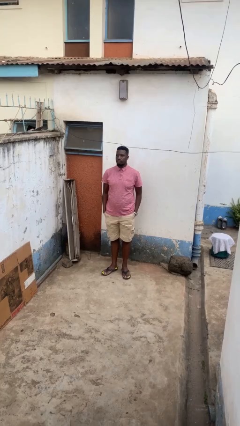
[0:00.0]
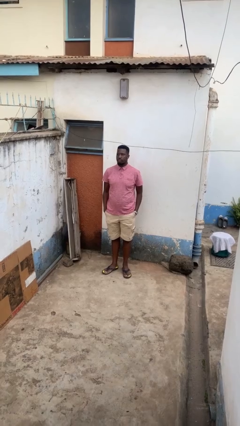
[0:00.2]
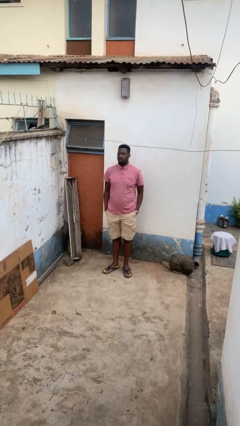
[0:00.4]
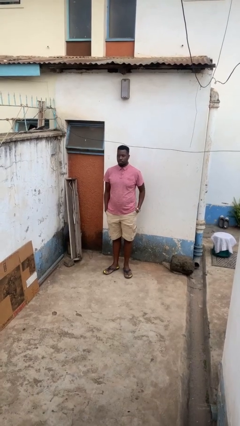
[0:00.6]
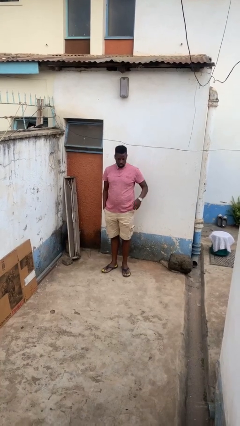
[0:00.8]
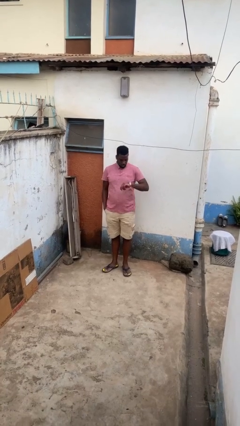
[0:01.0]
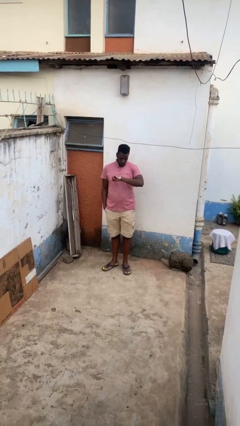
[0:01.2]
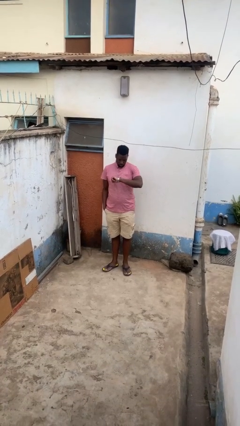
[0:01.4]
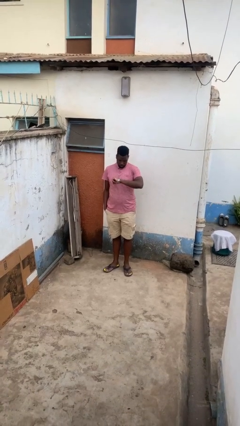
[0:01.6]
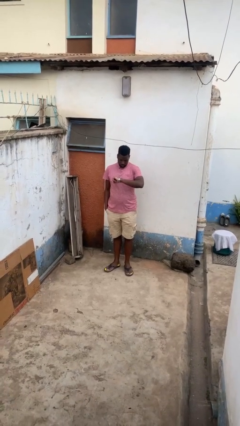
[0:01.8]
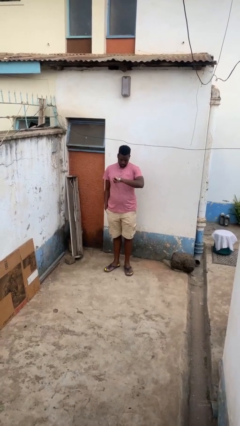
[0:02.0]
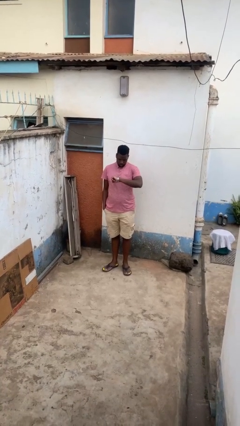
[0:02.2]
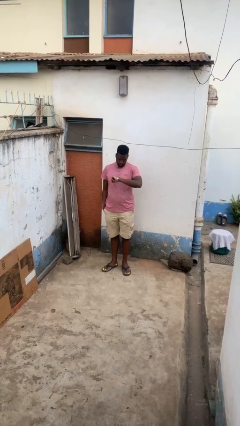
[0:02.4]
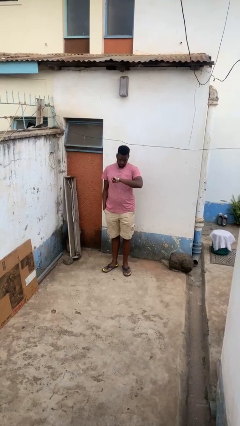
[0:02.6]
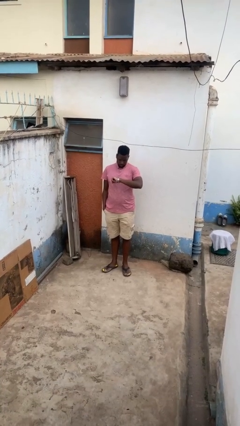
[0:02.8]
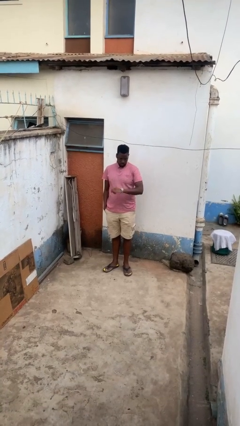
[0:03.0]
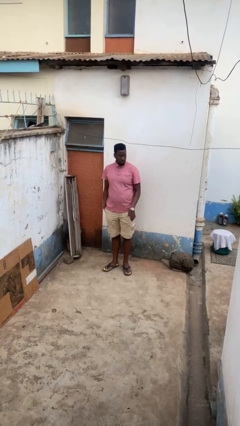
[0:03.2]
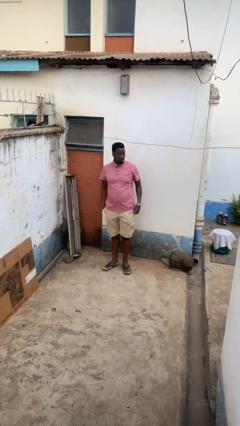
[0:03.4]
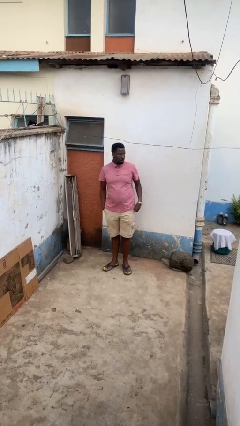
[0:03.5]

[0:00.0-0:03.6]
person looks at wristwatch

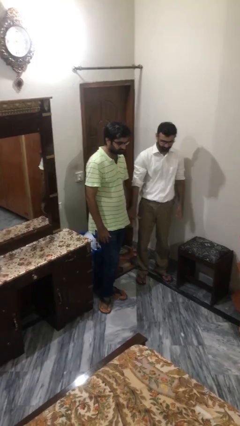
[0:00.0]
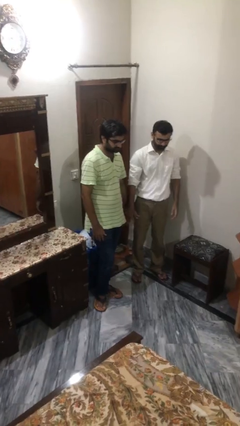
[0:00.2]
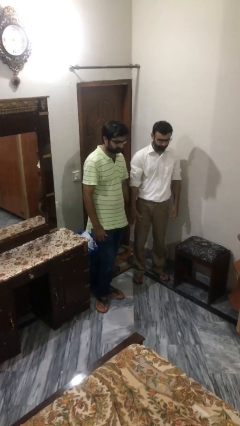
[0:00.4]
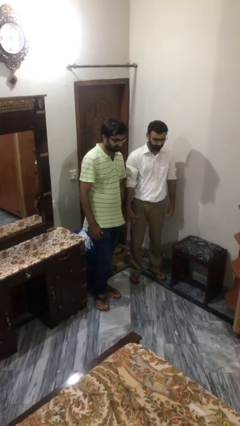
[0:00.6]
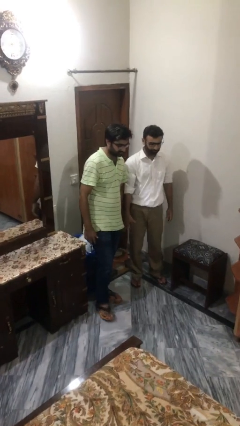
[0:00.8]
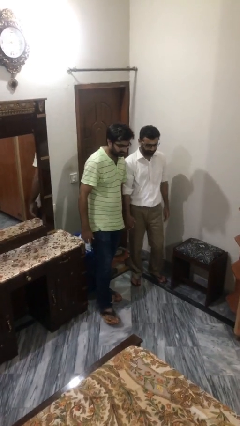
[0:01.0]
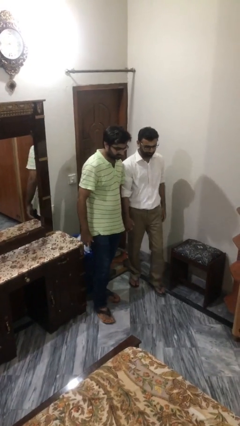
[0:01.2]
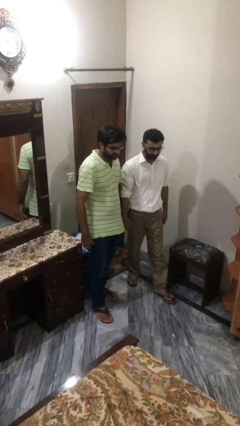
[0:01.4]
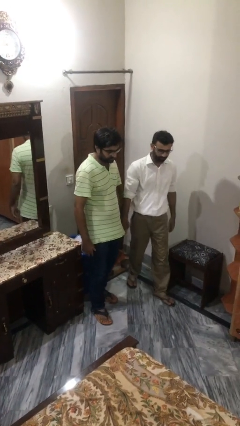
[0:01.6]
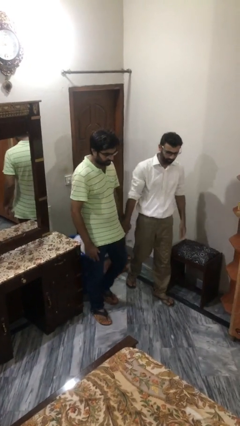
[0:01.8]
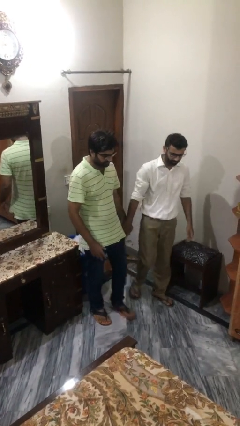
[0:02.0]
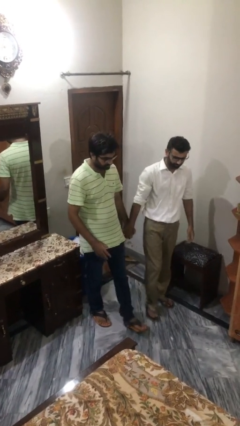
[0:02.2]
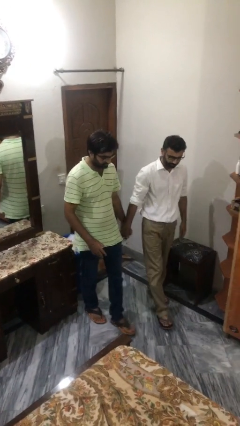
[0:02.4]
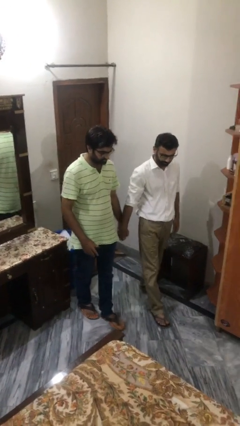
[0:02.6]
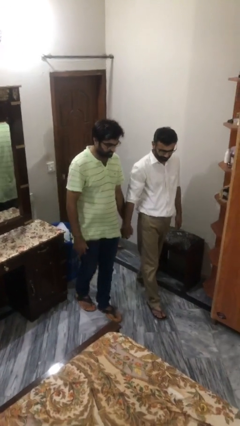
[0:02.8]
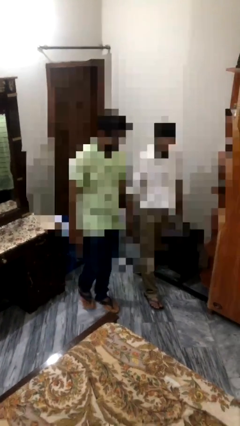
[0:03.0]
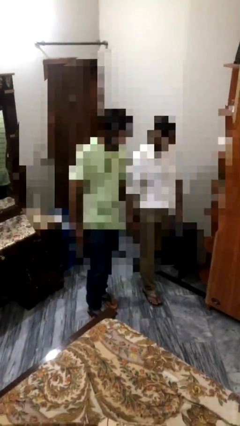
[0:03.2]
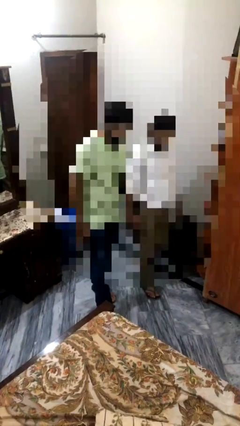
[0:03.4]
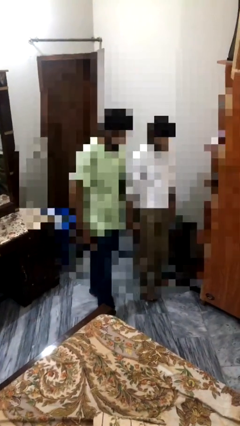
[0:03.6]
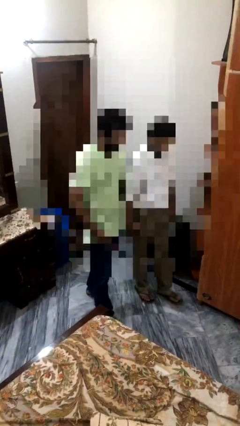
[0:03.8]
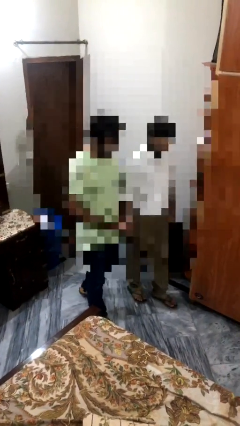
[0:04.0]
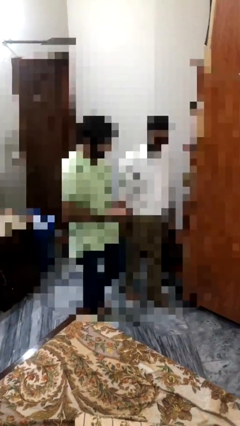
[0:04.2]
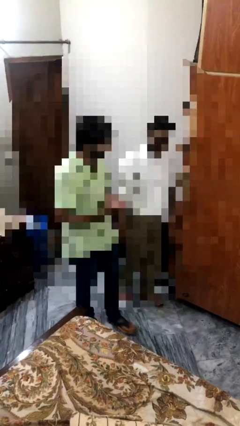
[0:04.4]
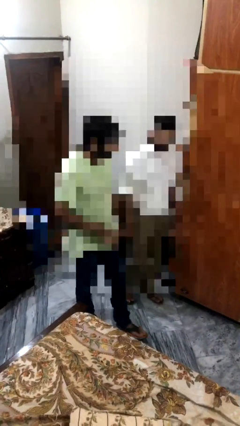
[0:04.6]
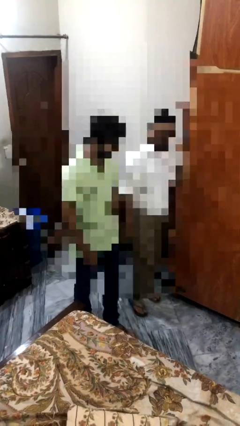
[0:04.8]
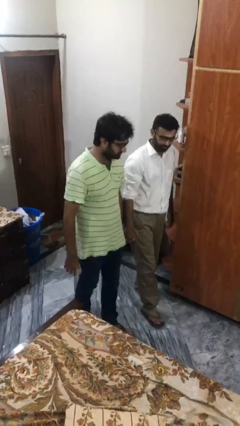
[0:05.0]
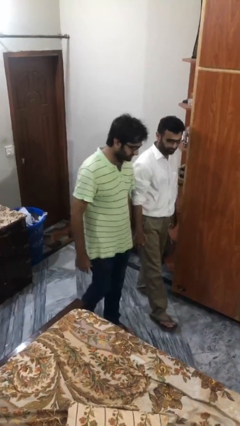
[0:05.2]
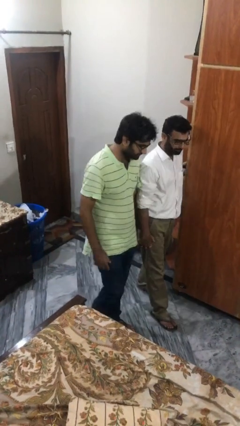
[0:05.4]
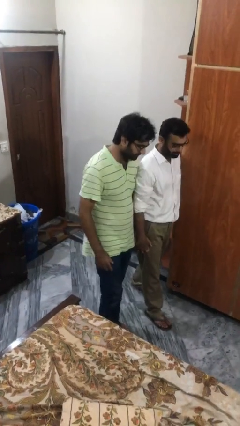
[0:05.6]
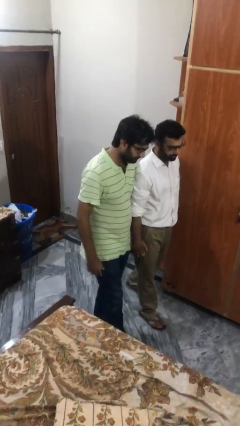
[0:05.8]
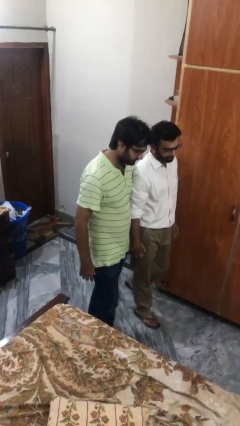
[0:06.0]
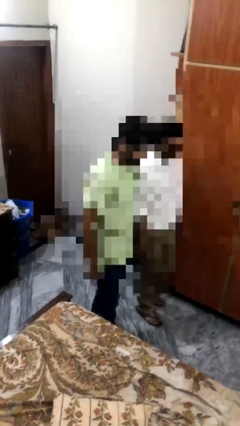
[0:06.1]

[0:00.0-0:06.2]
person holds hand

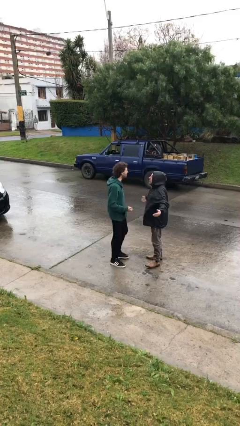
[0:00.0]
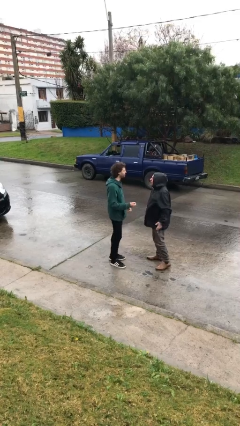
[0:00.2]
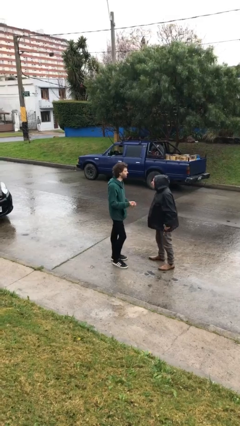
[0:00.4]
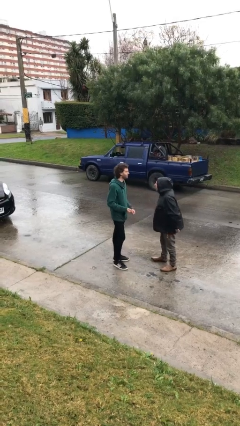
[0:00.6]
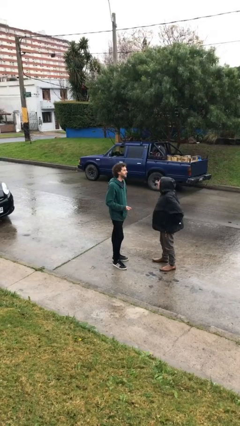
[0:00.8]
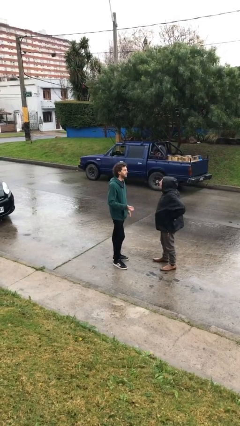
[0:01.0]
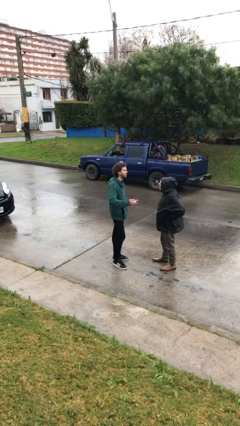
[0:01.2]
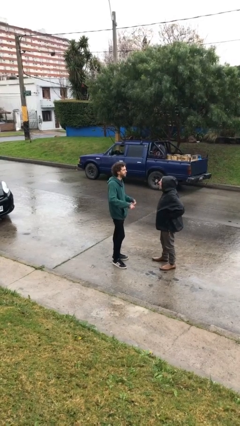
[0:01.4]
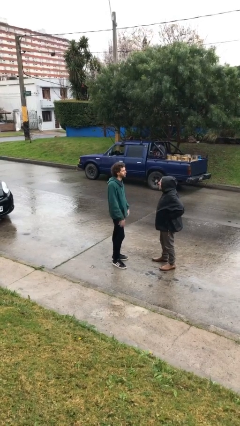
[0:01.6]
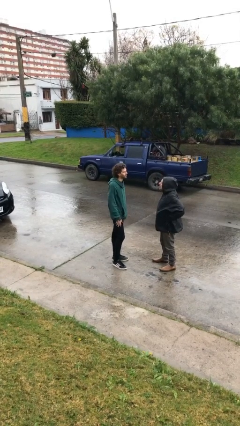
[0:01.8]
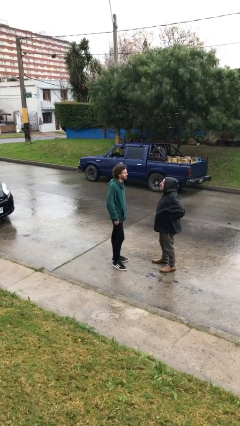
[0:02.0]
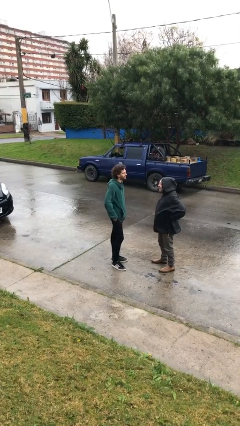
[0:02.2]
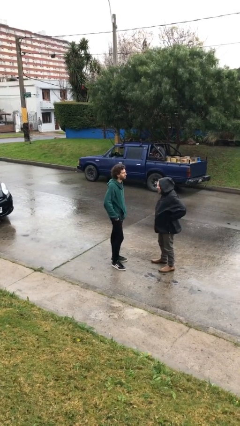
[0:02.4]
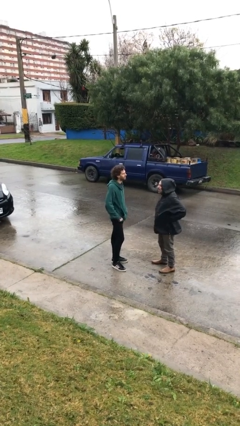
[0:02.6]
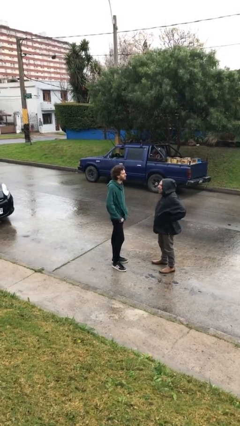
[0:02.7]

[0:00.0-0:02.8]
person talks to person

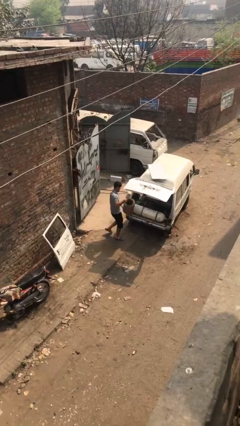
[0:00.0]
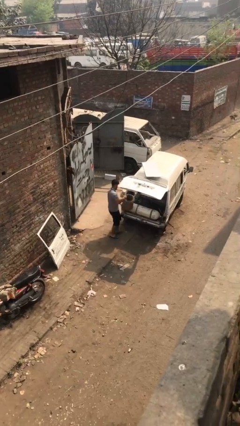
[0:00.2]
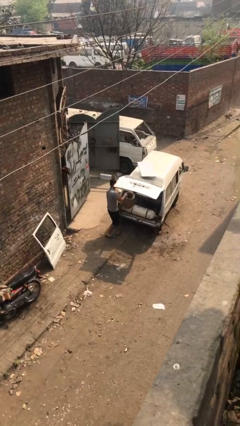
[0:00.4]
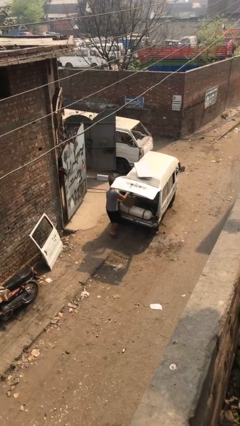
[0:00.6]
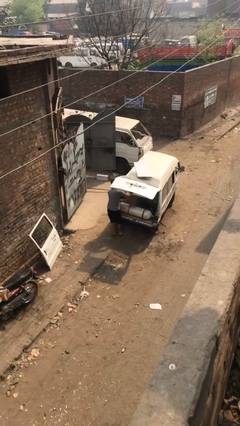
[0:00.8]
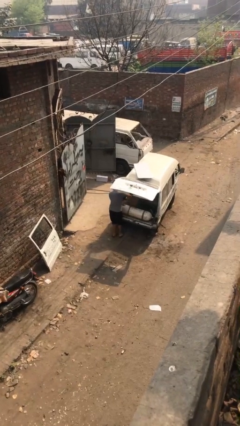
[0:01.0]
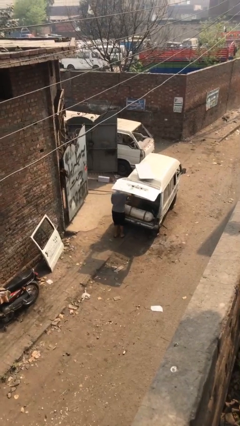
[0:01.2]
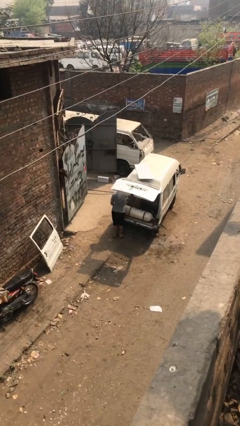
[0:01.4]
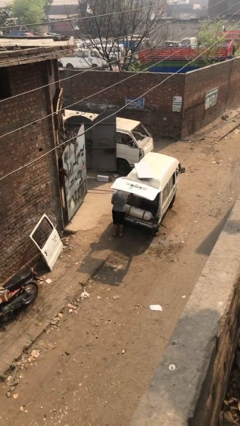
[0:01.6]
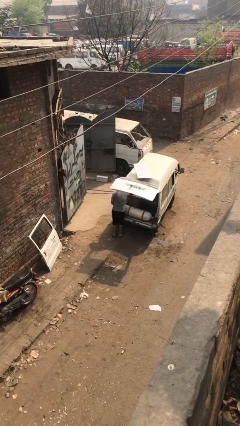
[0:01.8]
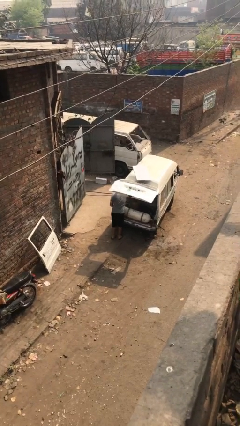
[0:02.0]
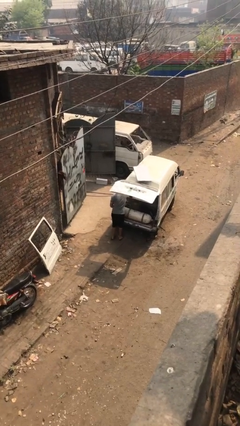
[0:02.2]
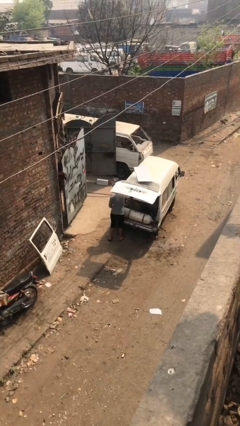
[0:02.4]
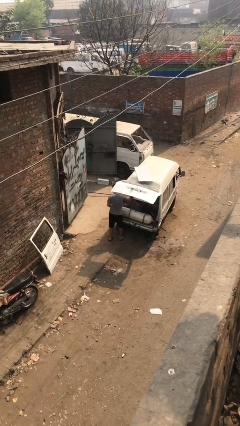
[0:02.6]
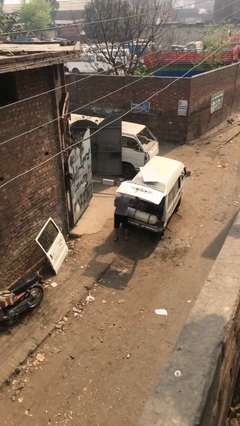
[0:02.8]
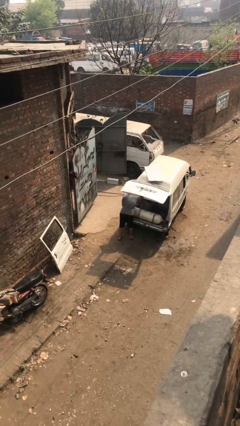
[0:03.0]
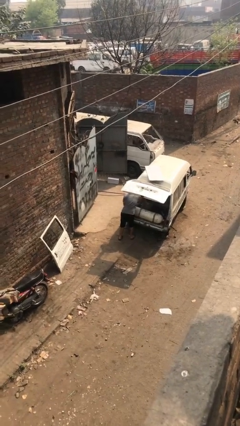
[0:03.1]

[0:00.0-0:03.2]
person loads car

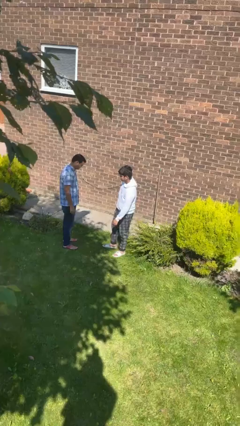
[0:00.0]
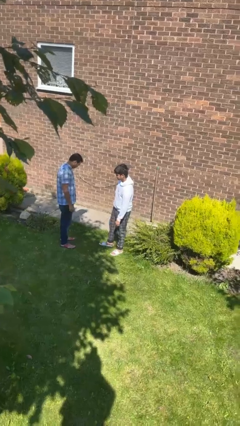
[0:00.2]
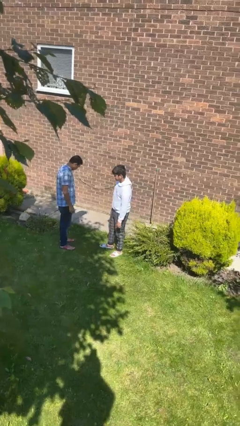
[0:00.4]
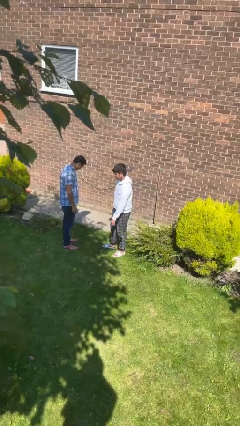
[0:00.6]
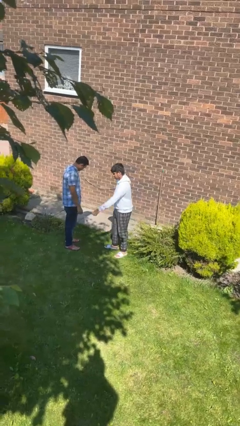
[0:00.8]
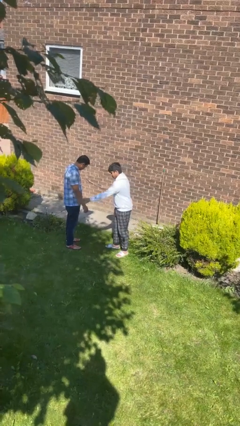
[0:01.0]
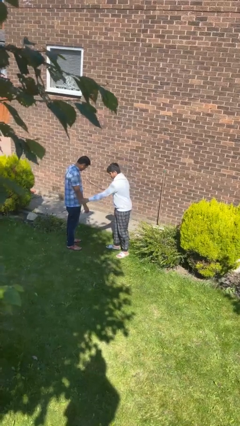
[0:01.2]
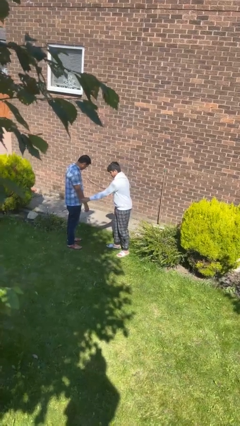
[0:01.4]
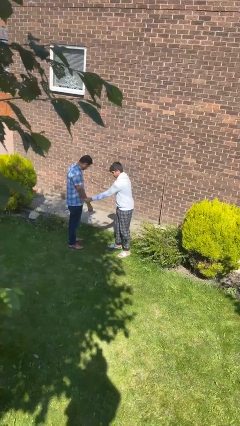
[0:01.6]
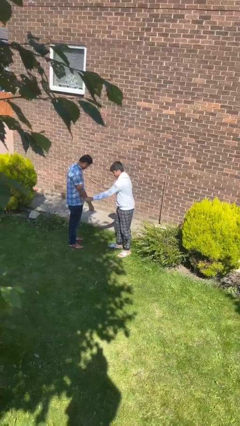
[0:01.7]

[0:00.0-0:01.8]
person grabs person by forearm
